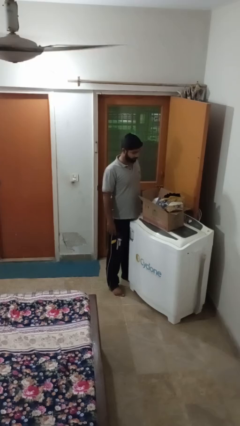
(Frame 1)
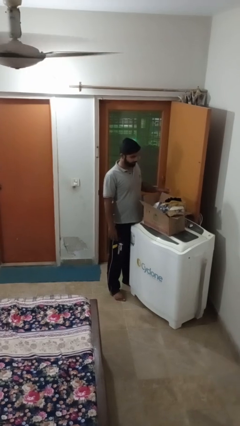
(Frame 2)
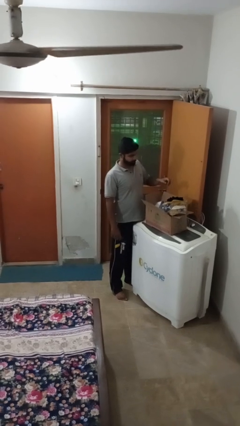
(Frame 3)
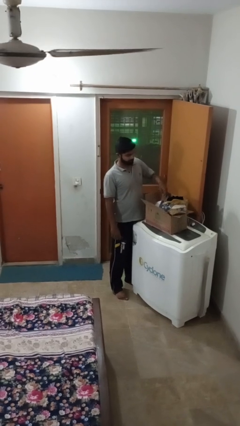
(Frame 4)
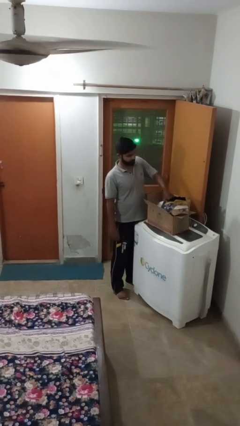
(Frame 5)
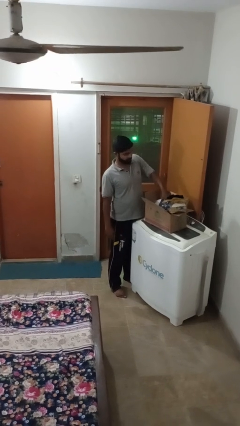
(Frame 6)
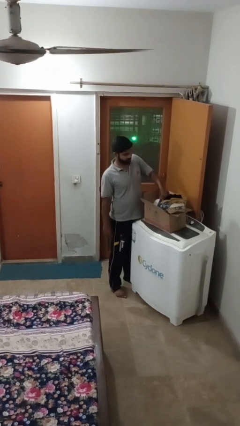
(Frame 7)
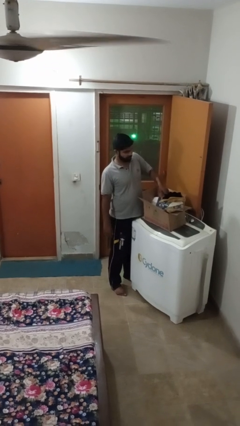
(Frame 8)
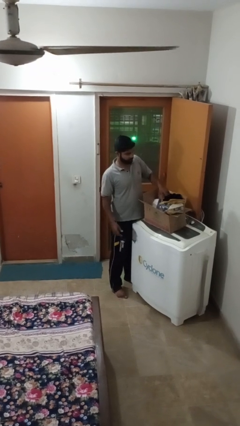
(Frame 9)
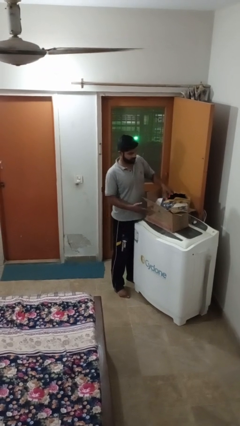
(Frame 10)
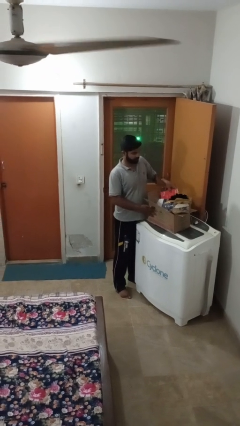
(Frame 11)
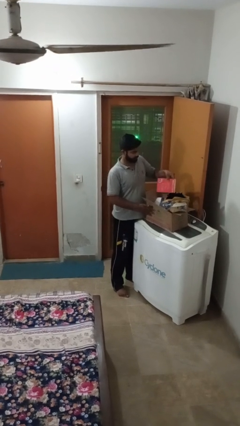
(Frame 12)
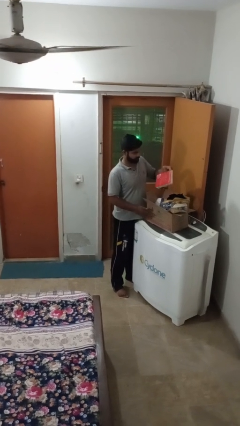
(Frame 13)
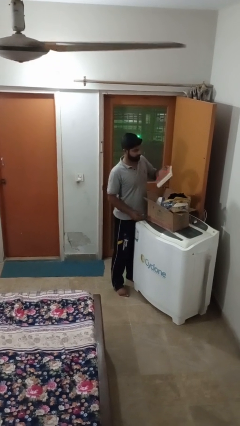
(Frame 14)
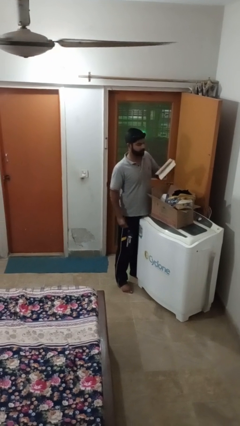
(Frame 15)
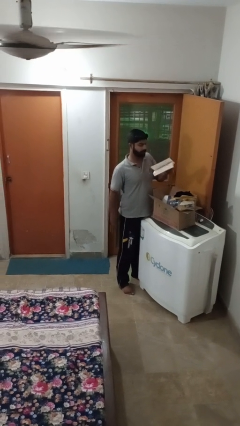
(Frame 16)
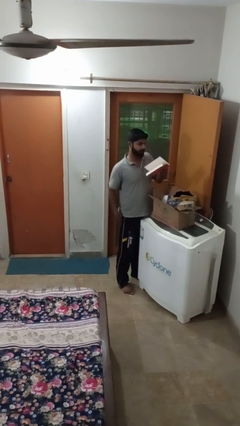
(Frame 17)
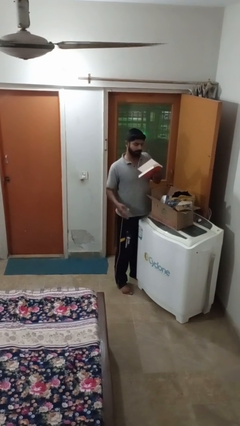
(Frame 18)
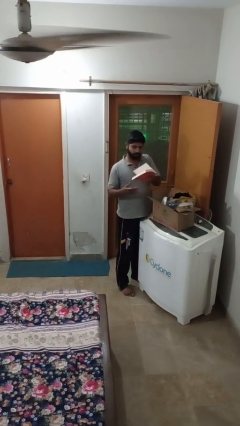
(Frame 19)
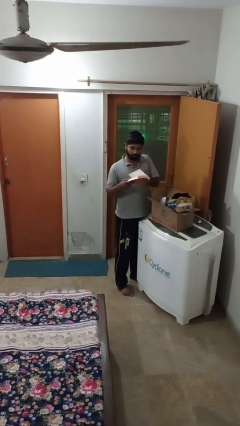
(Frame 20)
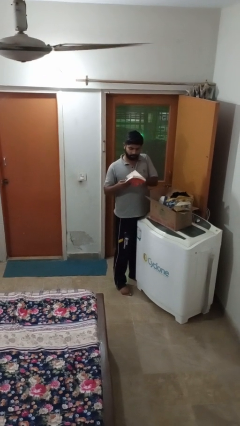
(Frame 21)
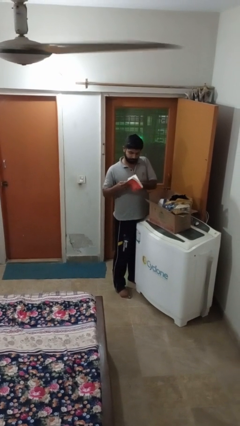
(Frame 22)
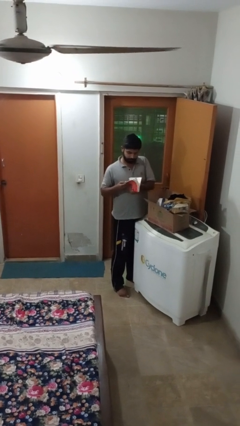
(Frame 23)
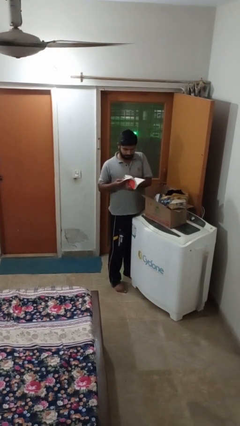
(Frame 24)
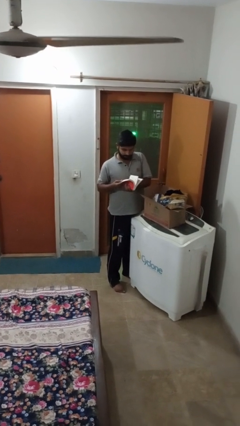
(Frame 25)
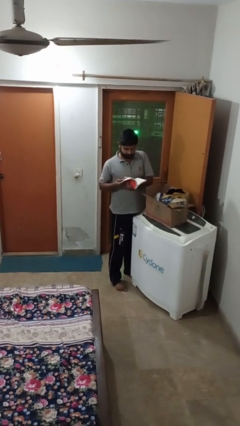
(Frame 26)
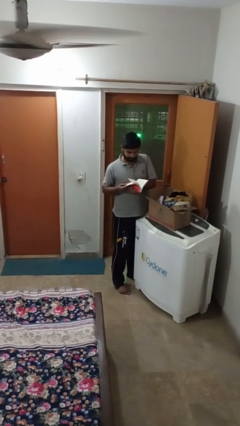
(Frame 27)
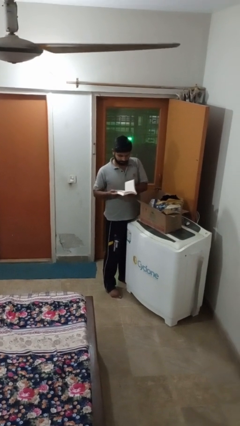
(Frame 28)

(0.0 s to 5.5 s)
person takes object from box

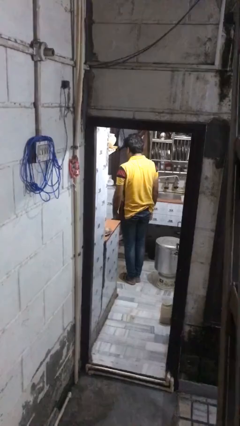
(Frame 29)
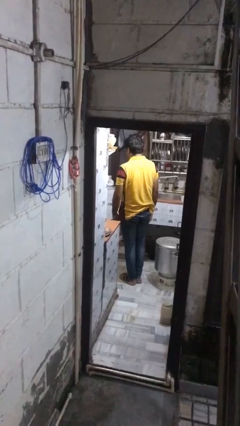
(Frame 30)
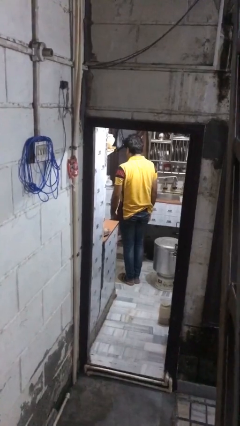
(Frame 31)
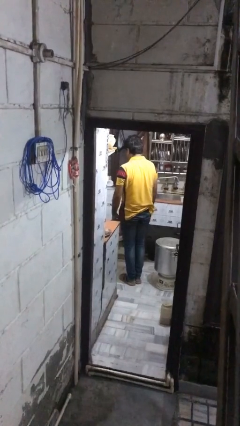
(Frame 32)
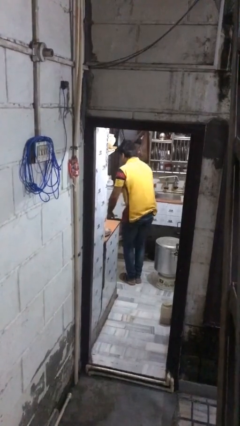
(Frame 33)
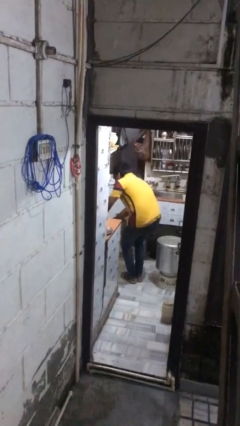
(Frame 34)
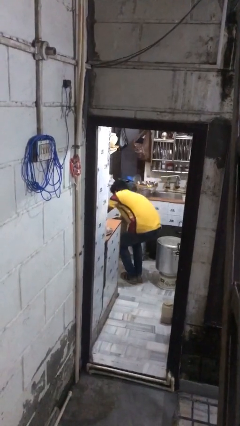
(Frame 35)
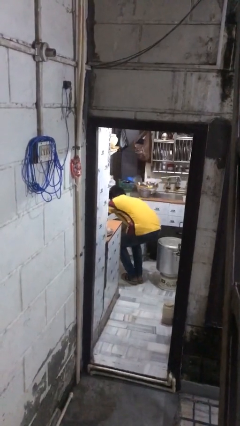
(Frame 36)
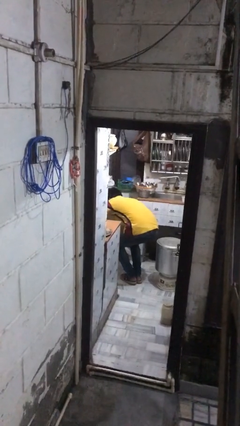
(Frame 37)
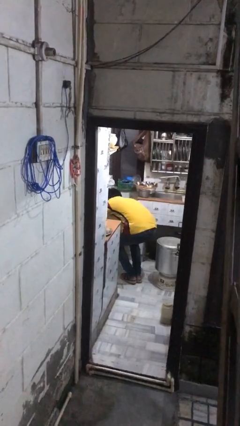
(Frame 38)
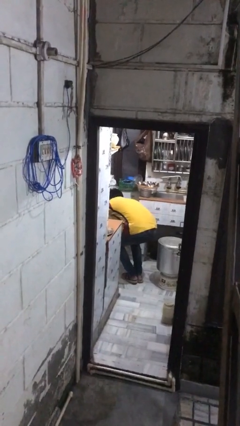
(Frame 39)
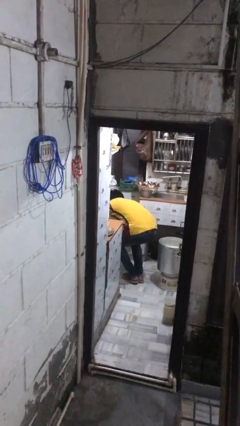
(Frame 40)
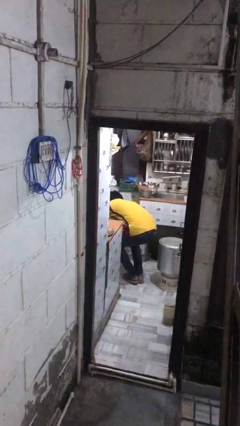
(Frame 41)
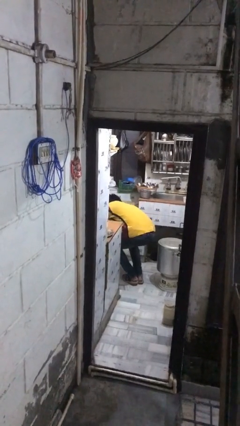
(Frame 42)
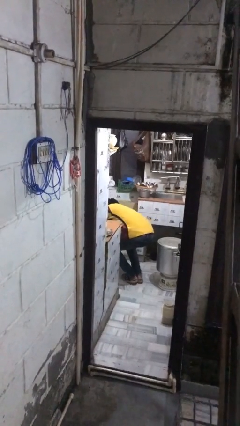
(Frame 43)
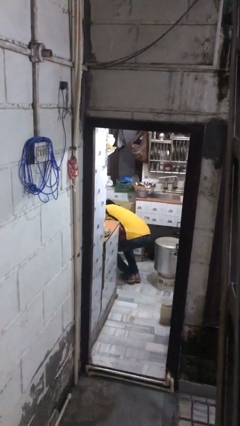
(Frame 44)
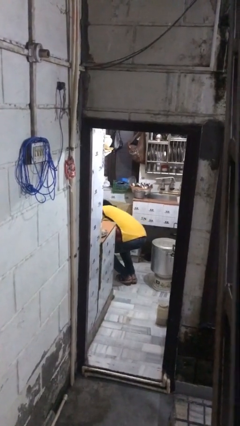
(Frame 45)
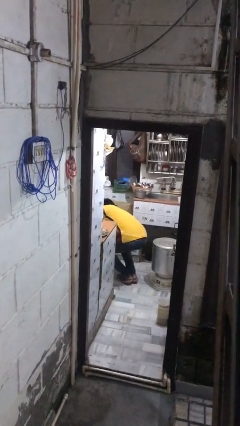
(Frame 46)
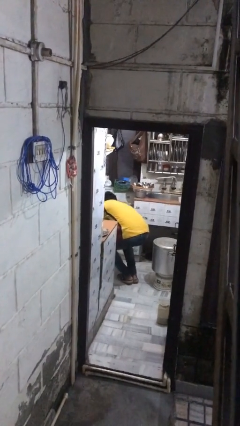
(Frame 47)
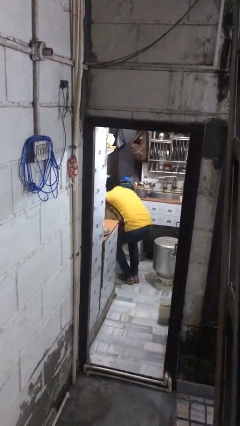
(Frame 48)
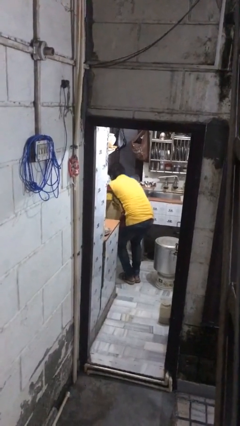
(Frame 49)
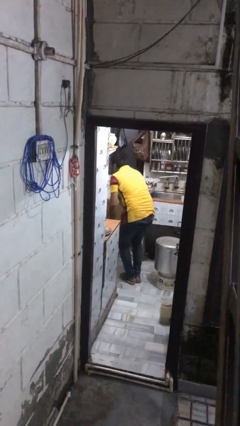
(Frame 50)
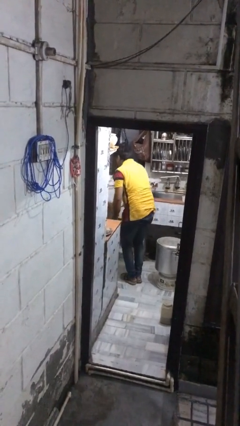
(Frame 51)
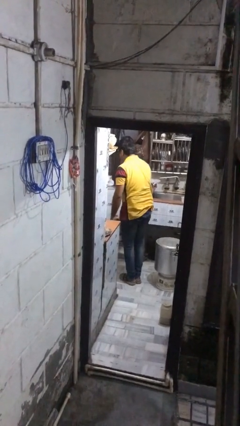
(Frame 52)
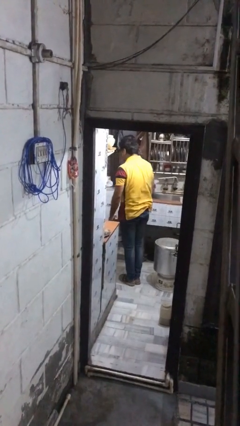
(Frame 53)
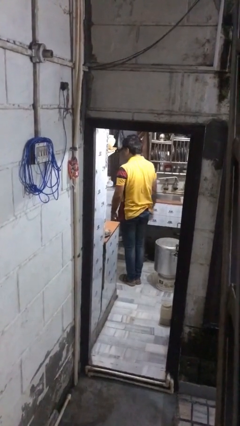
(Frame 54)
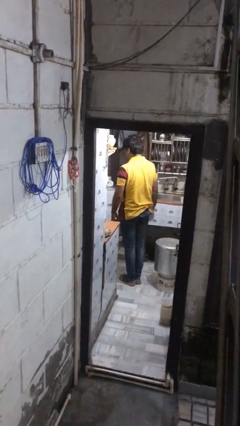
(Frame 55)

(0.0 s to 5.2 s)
person searches in kitchen drawer

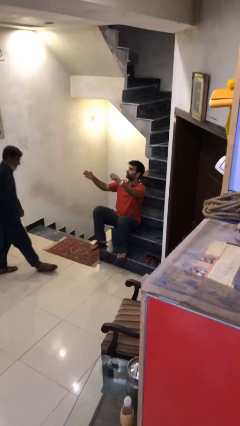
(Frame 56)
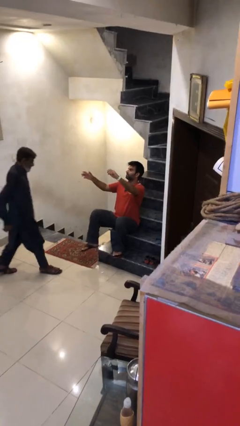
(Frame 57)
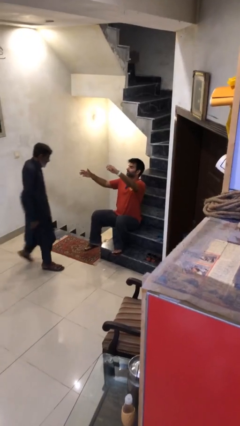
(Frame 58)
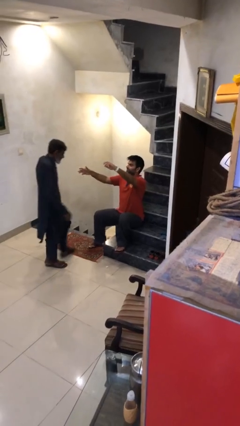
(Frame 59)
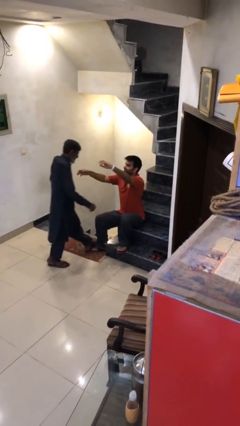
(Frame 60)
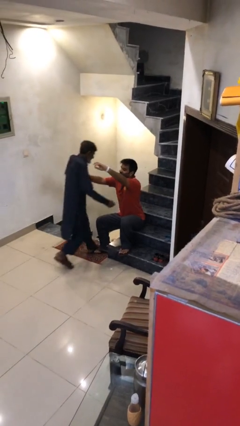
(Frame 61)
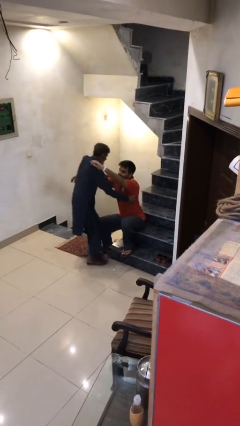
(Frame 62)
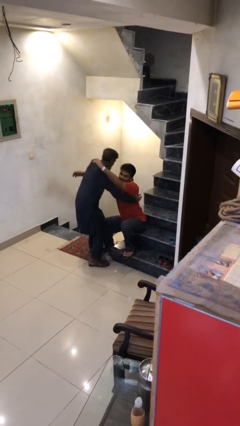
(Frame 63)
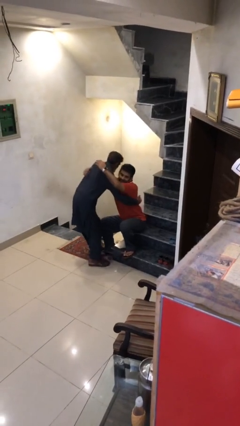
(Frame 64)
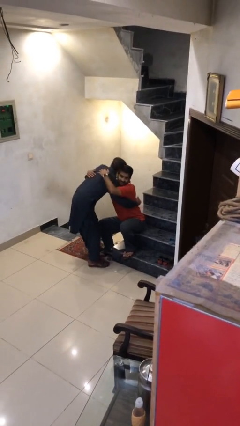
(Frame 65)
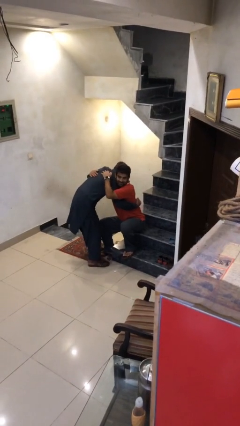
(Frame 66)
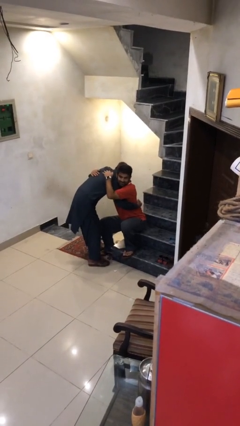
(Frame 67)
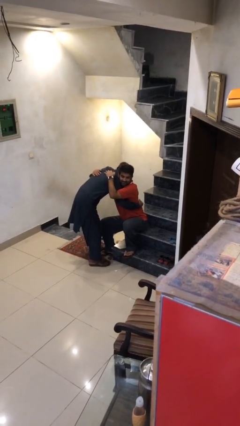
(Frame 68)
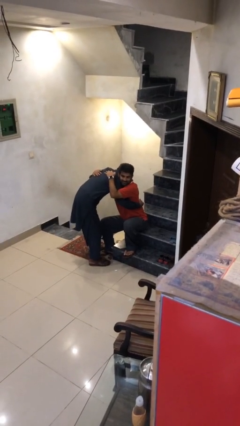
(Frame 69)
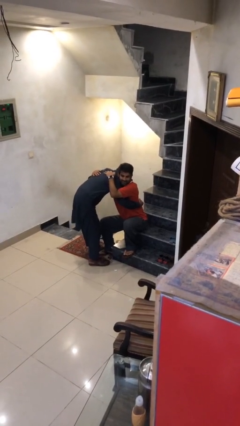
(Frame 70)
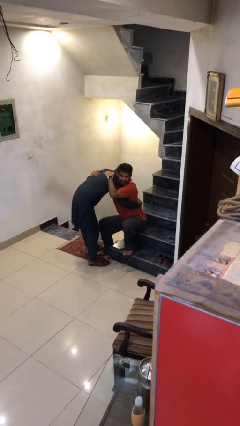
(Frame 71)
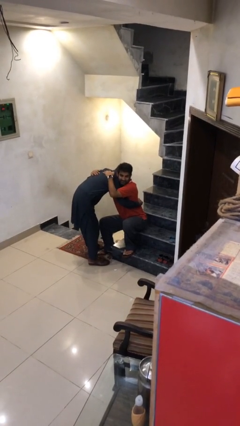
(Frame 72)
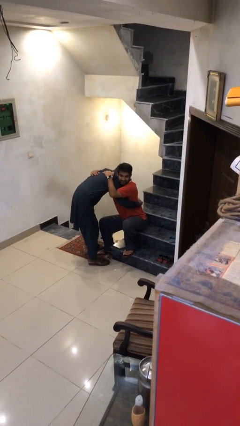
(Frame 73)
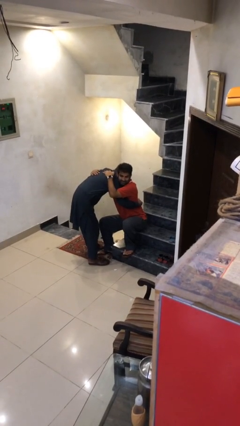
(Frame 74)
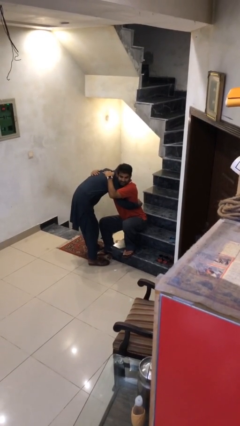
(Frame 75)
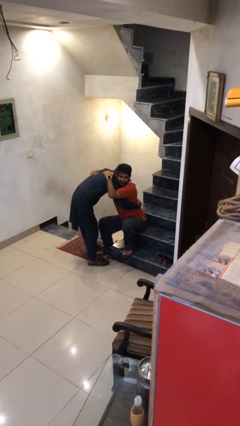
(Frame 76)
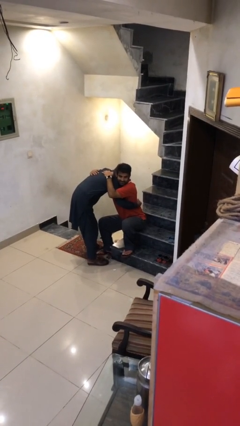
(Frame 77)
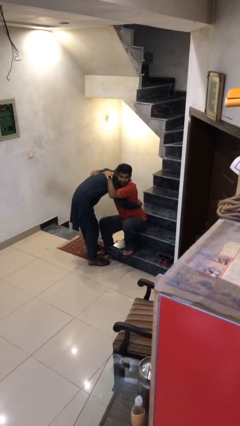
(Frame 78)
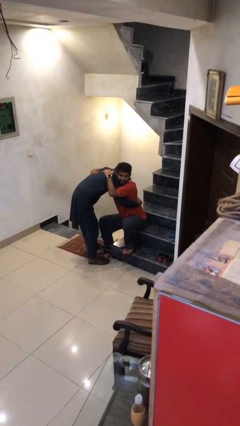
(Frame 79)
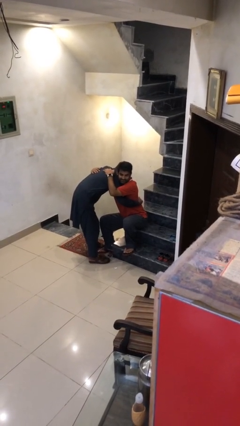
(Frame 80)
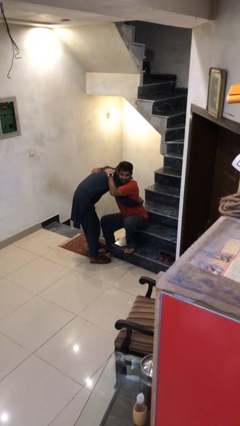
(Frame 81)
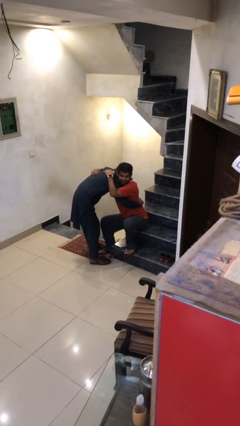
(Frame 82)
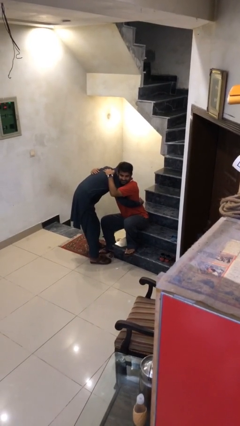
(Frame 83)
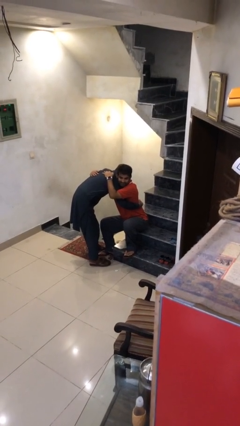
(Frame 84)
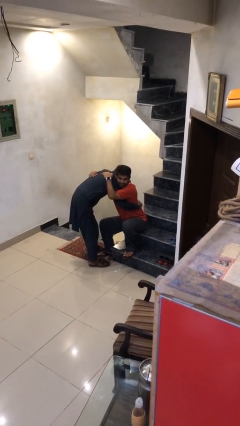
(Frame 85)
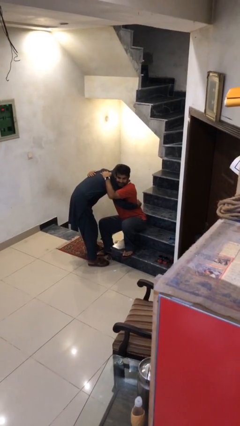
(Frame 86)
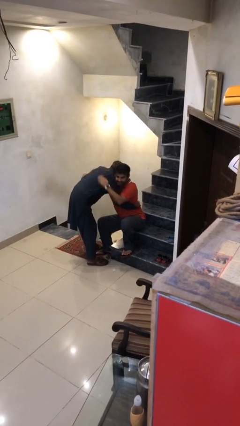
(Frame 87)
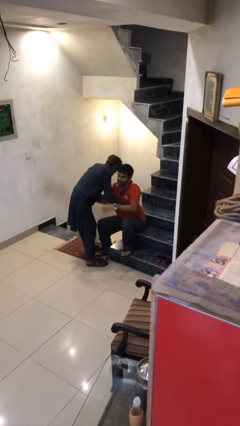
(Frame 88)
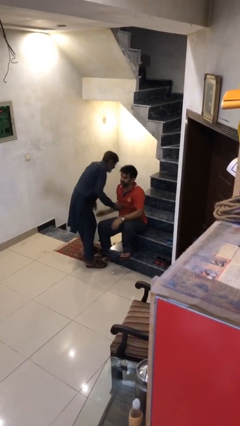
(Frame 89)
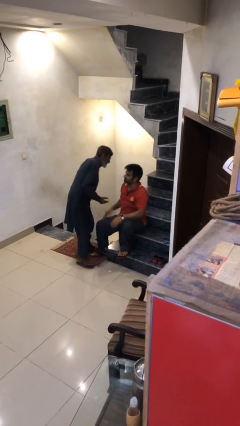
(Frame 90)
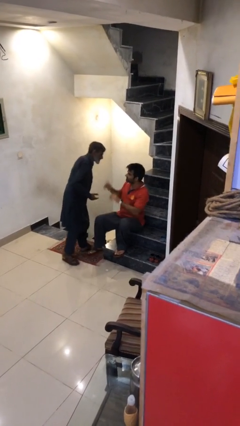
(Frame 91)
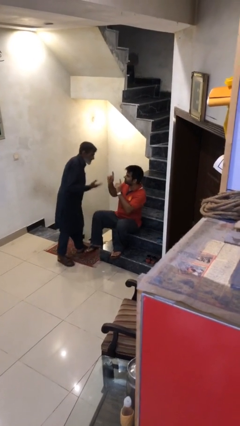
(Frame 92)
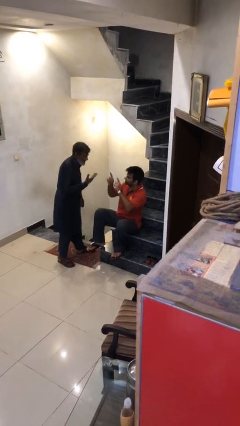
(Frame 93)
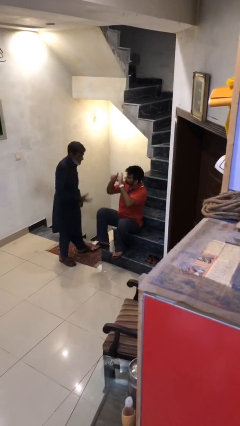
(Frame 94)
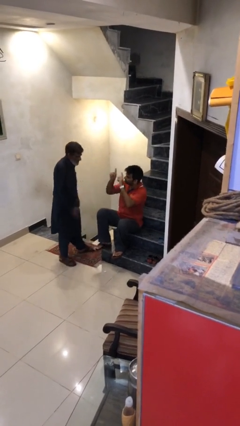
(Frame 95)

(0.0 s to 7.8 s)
person embraces person
